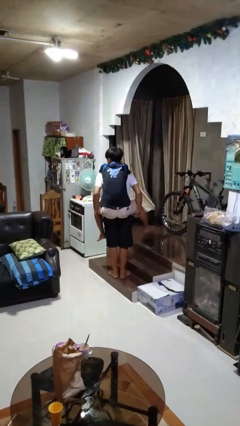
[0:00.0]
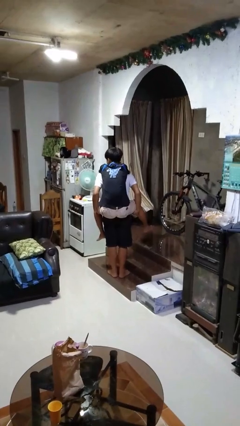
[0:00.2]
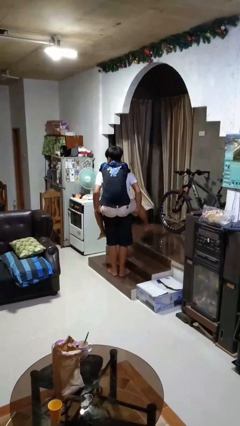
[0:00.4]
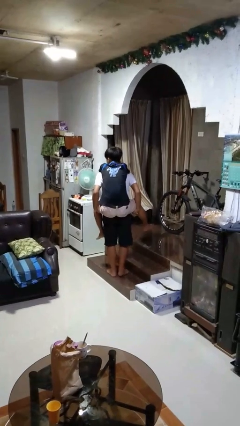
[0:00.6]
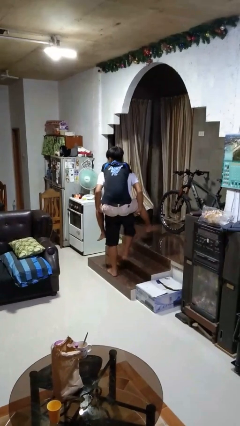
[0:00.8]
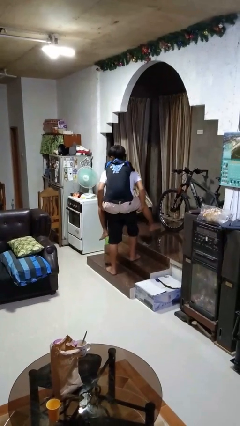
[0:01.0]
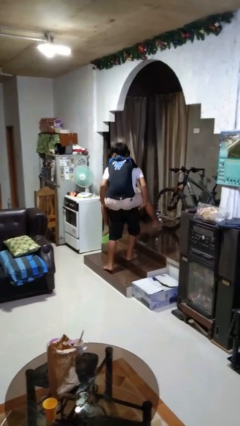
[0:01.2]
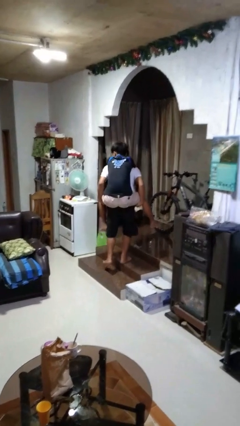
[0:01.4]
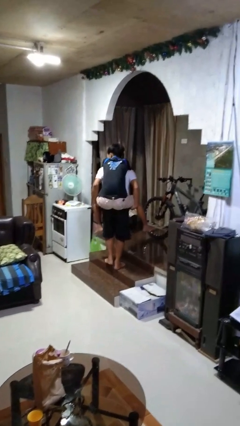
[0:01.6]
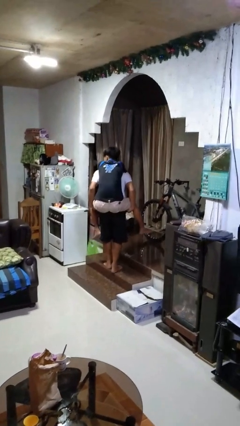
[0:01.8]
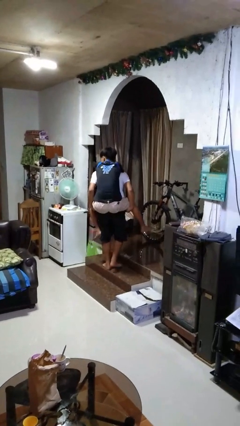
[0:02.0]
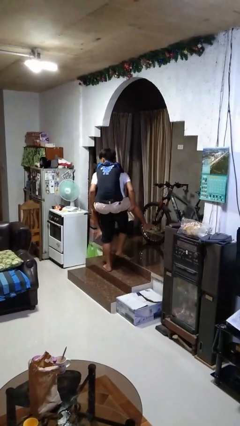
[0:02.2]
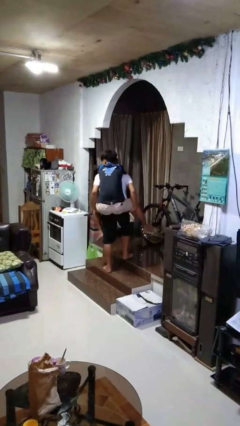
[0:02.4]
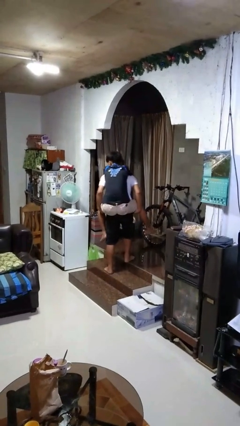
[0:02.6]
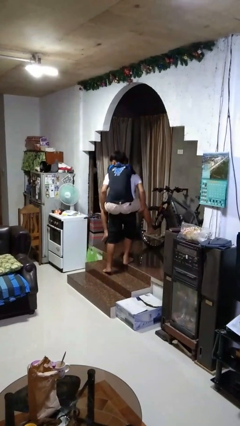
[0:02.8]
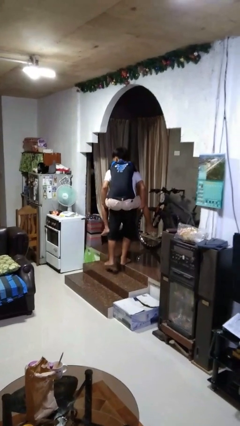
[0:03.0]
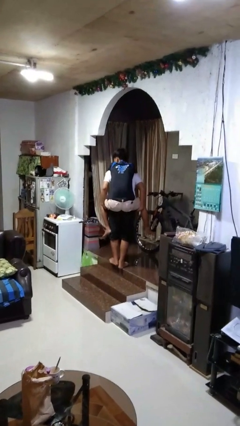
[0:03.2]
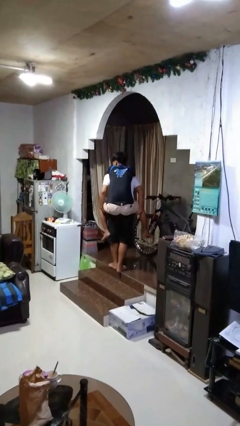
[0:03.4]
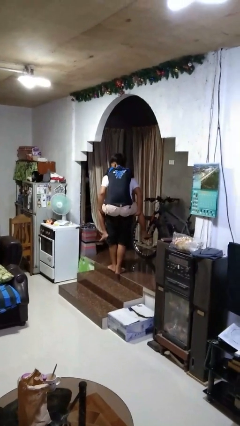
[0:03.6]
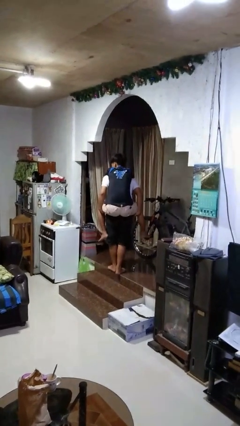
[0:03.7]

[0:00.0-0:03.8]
person carries person on back

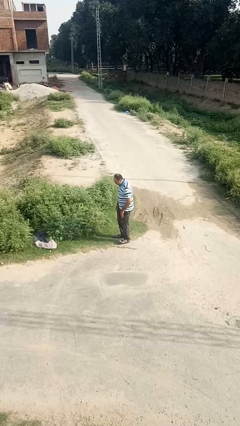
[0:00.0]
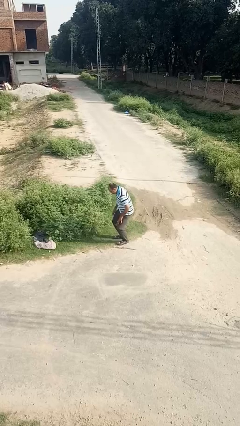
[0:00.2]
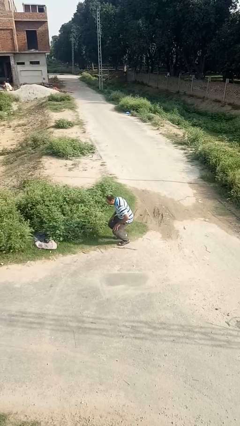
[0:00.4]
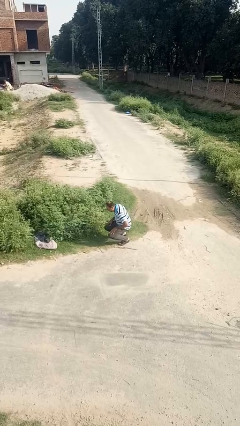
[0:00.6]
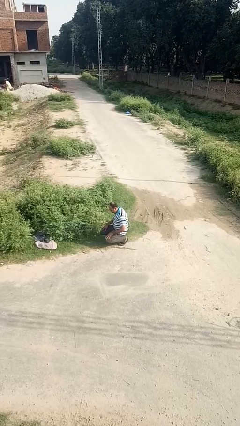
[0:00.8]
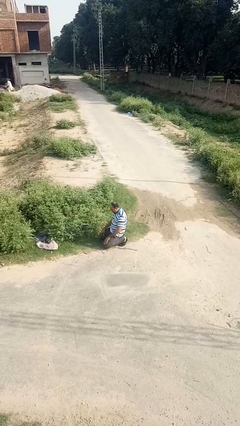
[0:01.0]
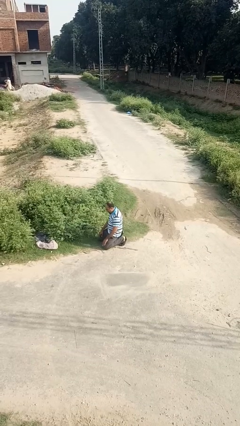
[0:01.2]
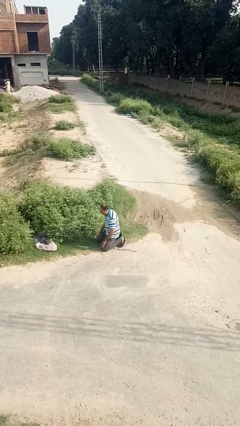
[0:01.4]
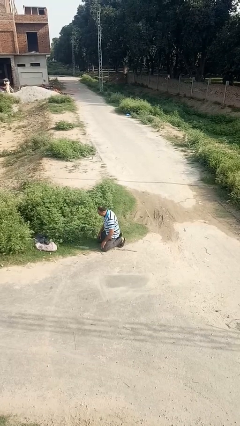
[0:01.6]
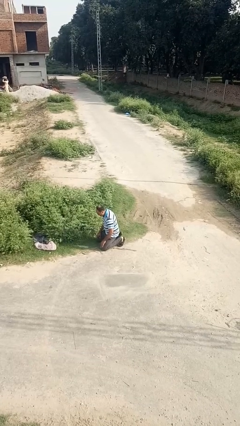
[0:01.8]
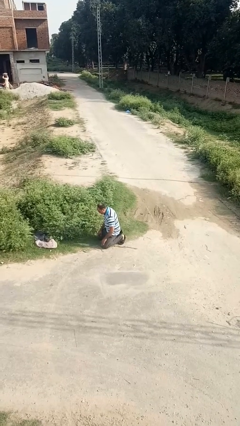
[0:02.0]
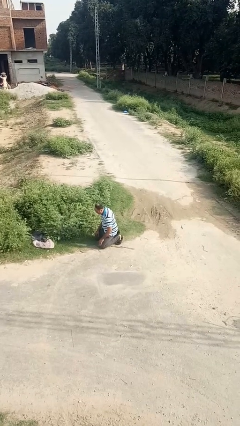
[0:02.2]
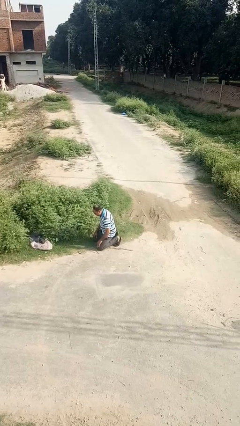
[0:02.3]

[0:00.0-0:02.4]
person kneels

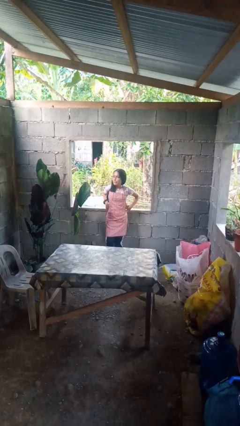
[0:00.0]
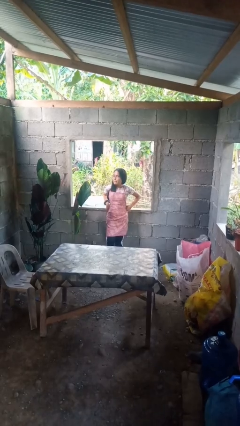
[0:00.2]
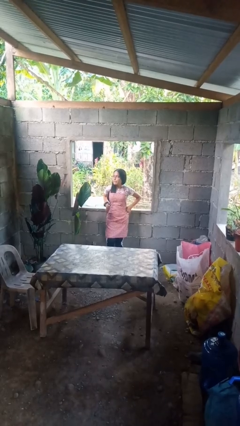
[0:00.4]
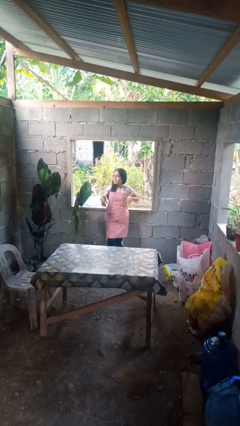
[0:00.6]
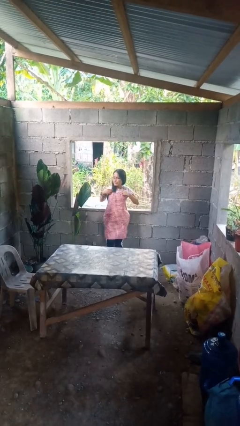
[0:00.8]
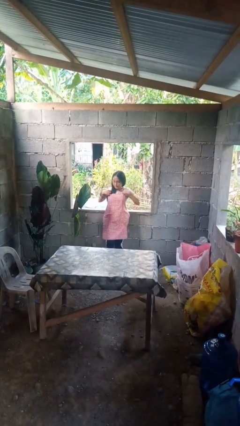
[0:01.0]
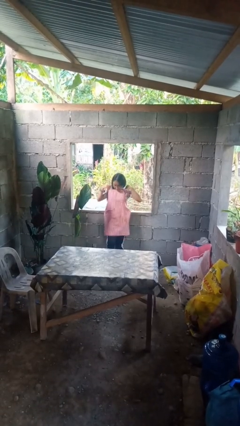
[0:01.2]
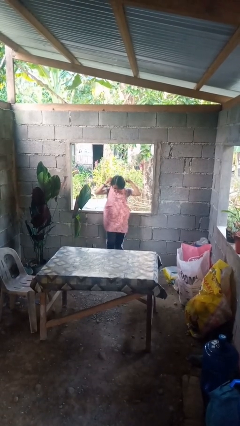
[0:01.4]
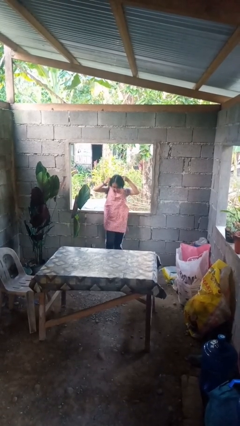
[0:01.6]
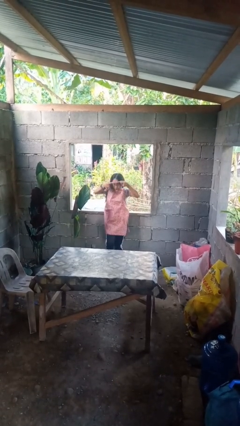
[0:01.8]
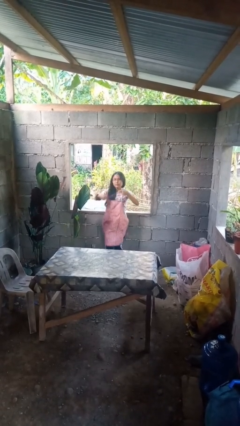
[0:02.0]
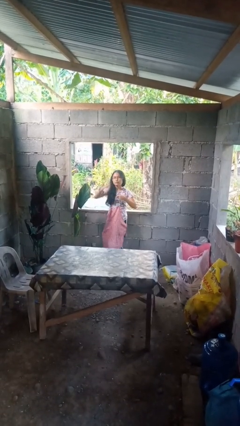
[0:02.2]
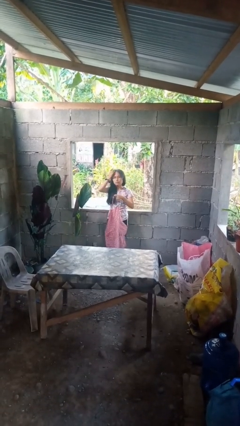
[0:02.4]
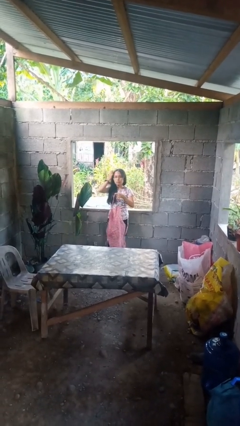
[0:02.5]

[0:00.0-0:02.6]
person takes off apron

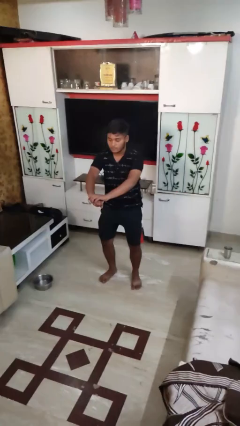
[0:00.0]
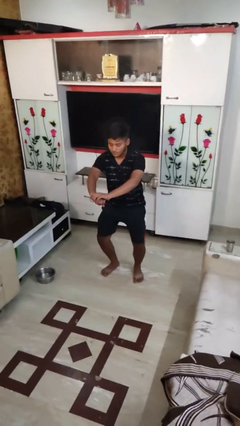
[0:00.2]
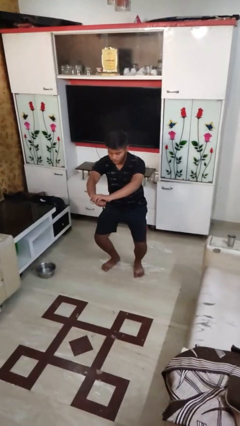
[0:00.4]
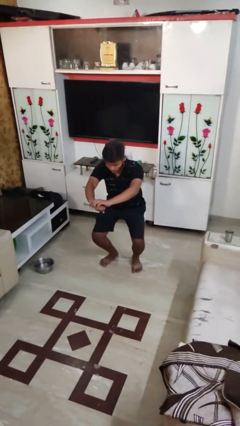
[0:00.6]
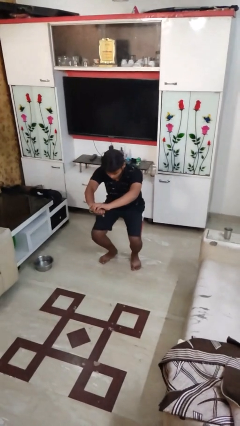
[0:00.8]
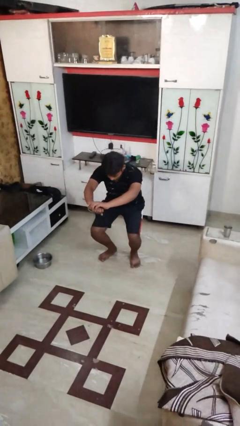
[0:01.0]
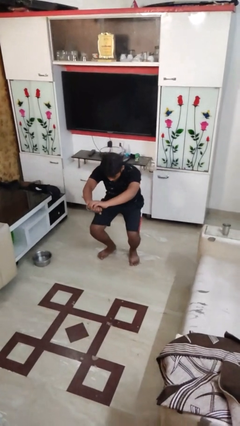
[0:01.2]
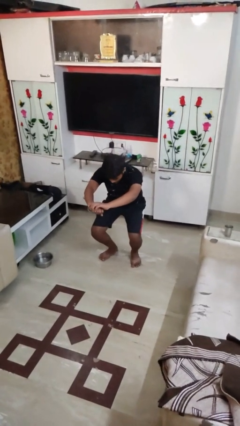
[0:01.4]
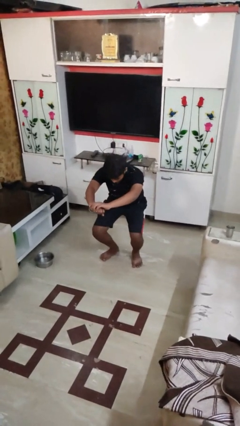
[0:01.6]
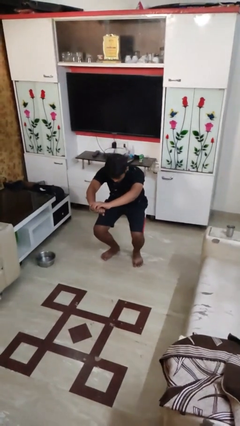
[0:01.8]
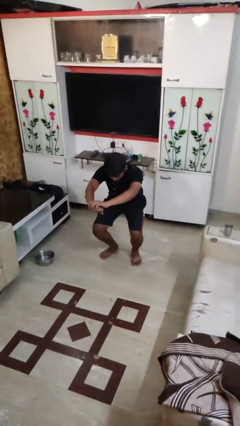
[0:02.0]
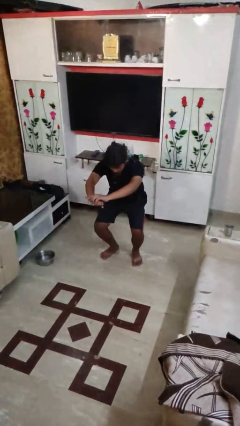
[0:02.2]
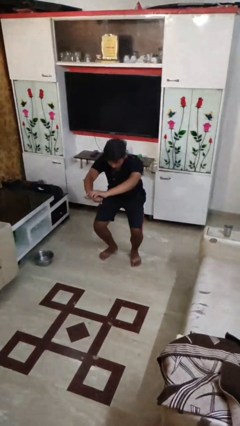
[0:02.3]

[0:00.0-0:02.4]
person squats

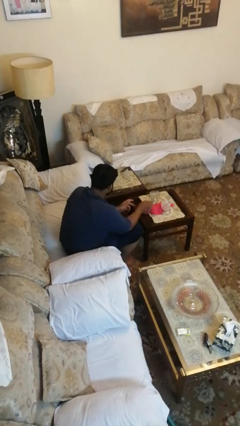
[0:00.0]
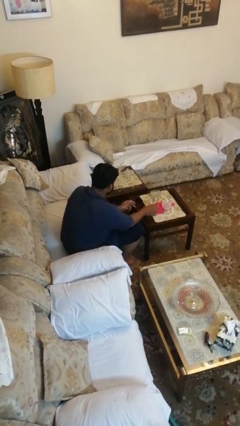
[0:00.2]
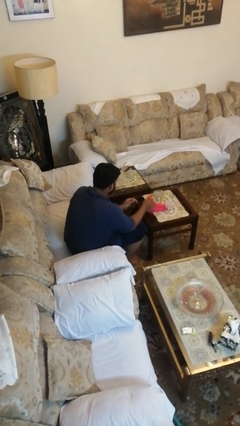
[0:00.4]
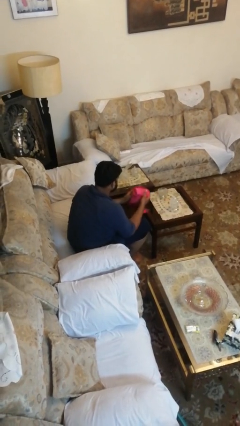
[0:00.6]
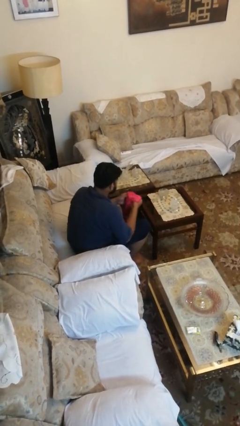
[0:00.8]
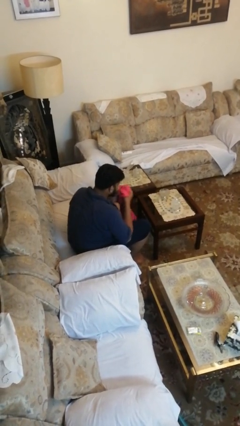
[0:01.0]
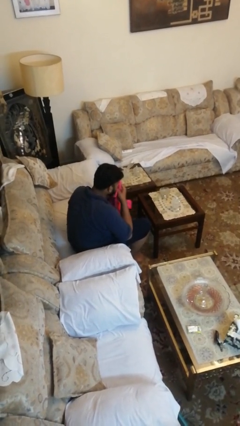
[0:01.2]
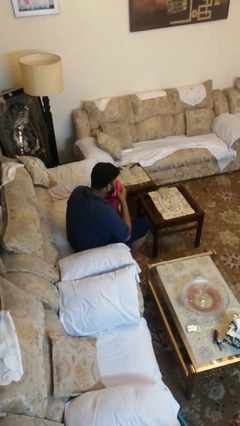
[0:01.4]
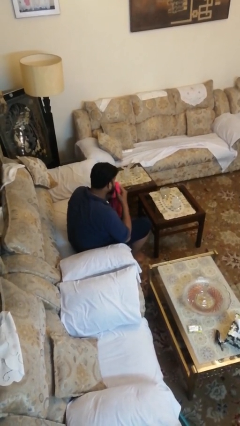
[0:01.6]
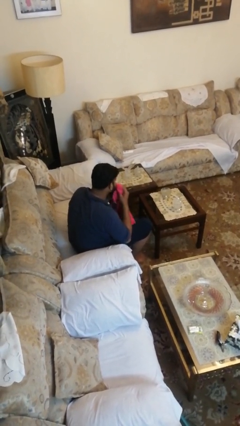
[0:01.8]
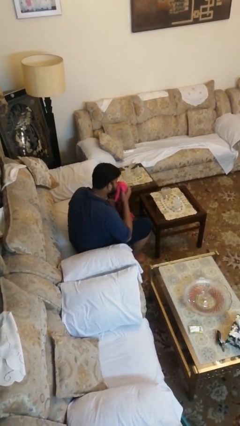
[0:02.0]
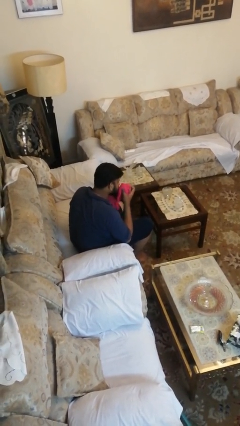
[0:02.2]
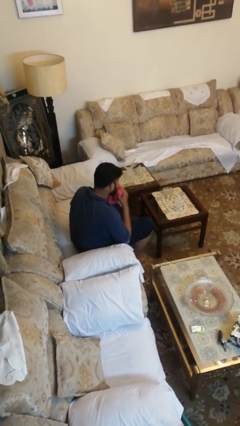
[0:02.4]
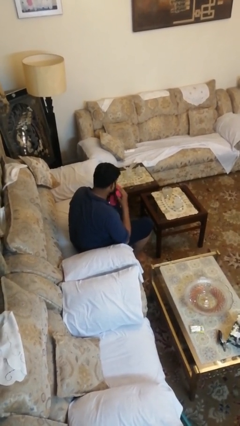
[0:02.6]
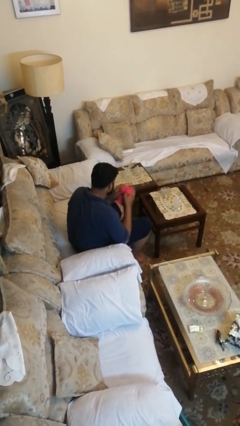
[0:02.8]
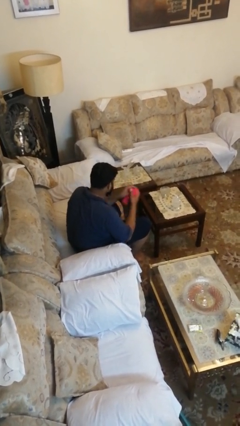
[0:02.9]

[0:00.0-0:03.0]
person wipes mouth with napkin

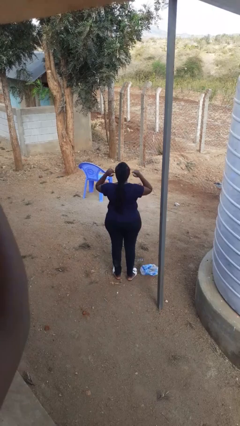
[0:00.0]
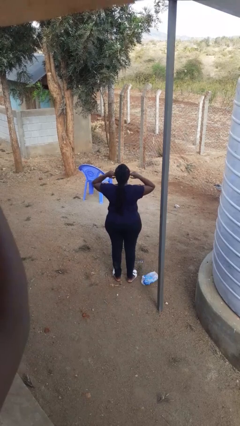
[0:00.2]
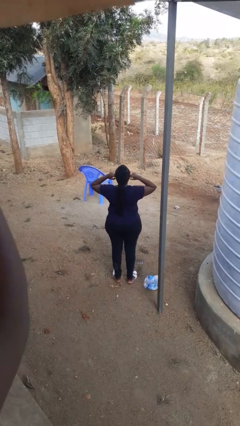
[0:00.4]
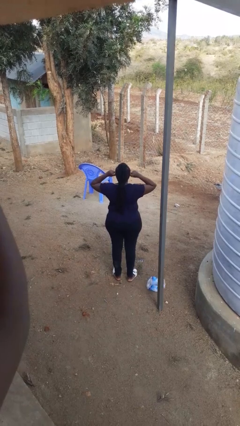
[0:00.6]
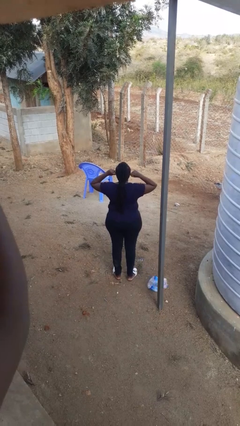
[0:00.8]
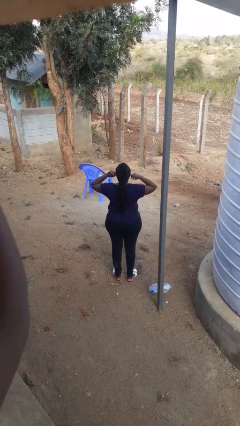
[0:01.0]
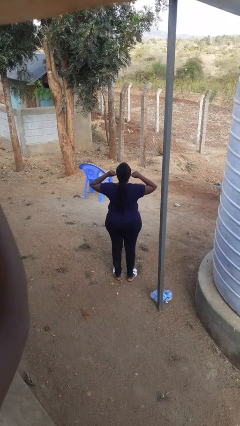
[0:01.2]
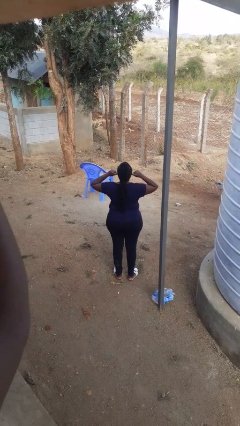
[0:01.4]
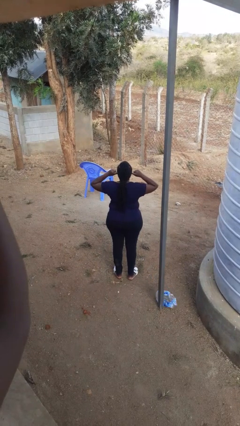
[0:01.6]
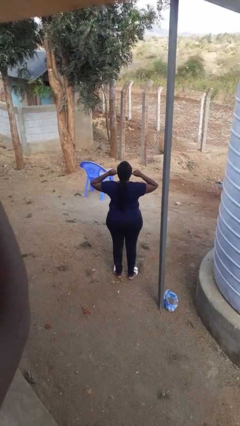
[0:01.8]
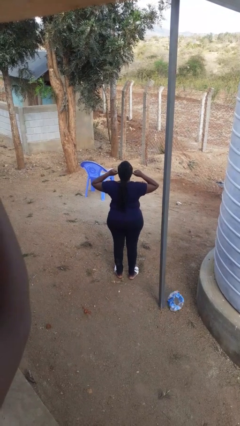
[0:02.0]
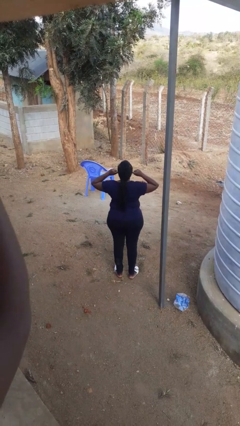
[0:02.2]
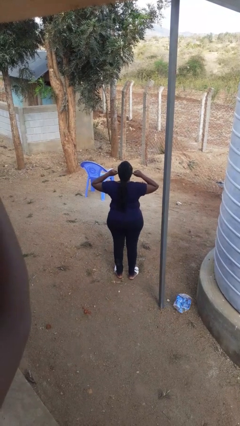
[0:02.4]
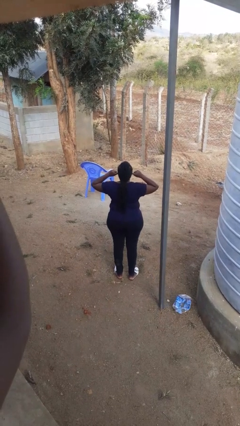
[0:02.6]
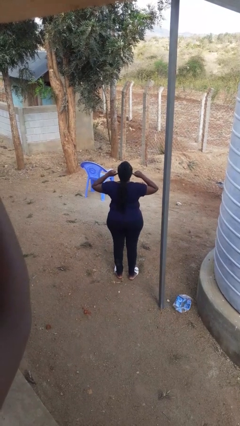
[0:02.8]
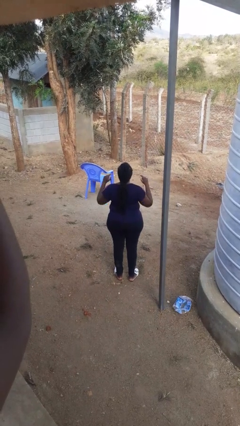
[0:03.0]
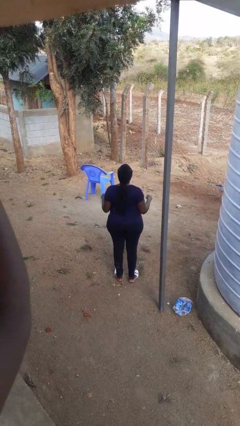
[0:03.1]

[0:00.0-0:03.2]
person puts fingers in ear
